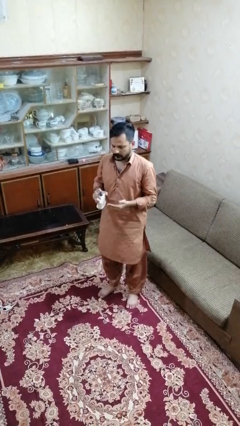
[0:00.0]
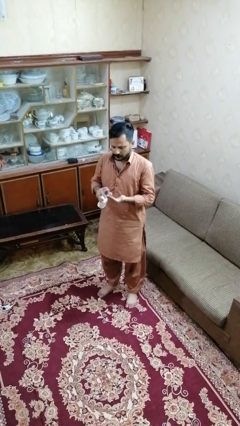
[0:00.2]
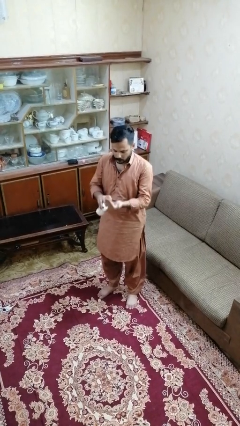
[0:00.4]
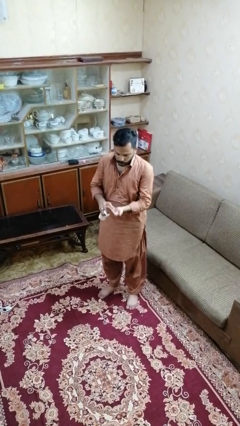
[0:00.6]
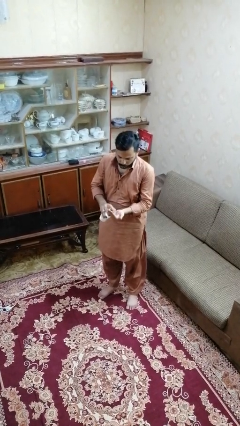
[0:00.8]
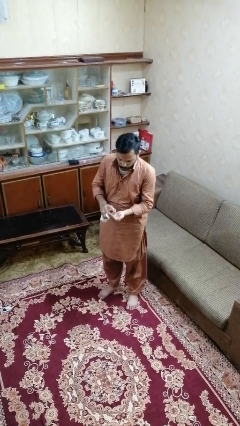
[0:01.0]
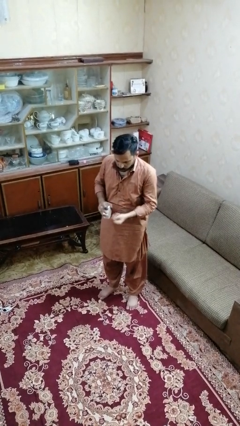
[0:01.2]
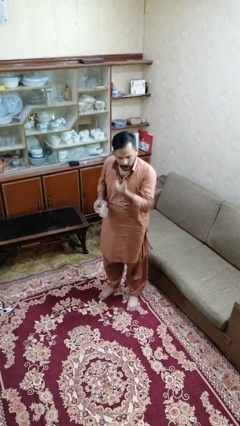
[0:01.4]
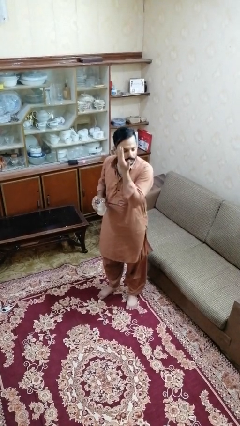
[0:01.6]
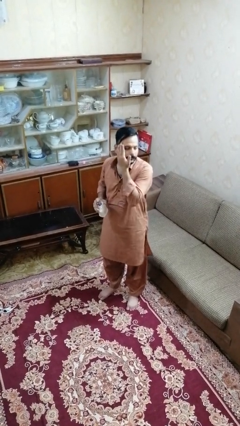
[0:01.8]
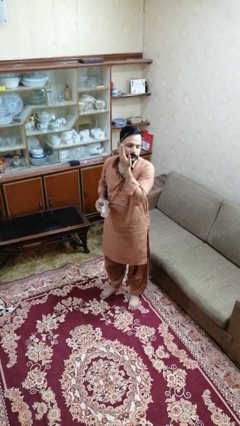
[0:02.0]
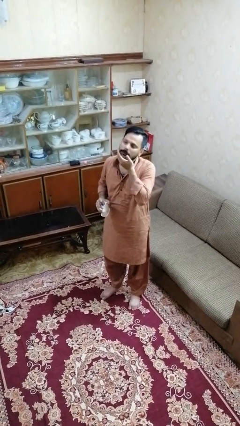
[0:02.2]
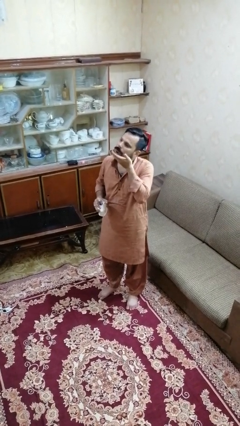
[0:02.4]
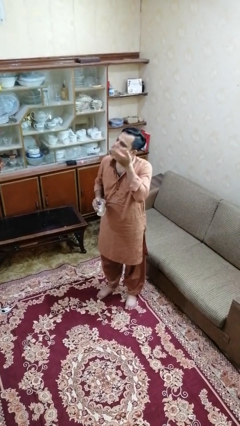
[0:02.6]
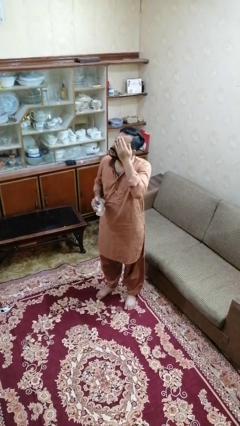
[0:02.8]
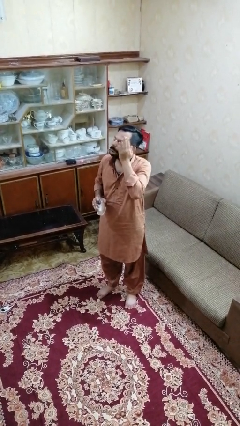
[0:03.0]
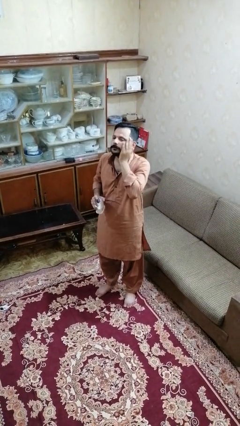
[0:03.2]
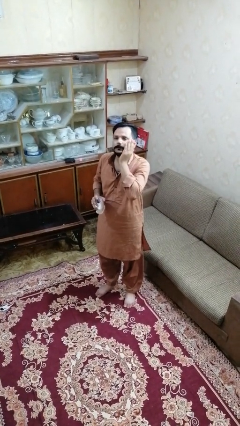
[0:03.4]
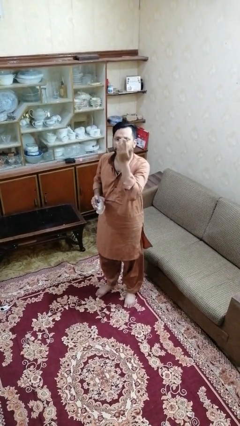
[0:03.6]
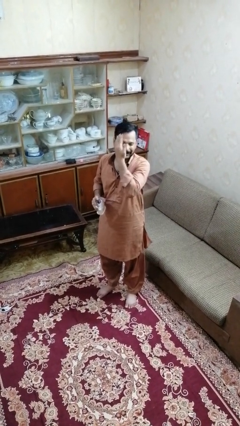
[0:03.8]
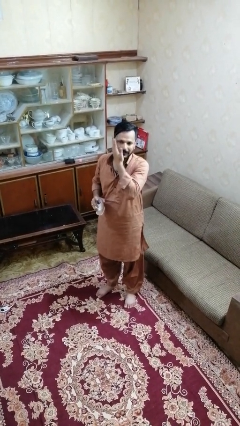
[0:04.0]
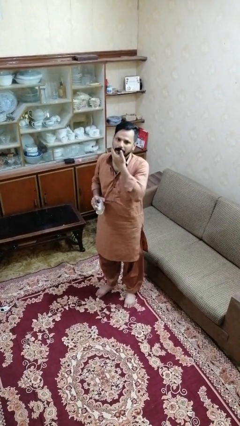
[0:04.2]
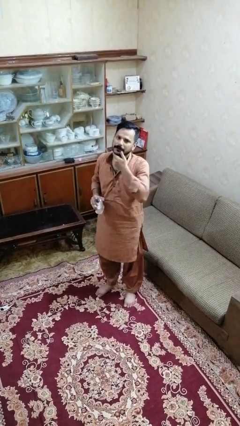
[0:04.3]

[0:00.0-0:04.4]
person applies facial moisturizer

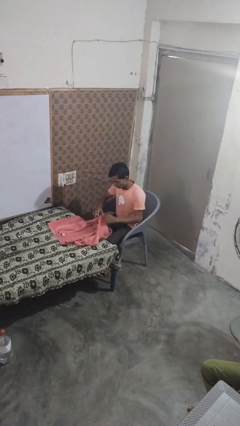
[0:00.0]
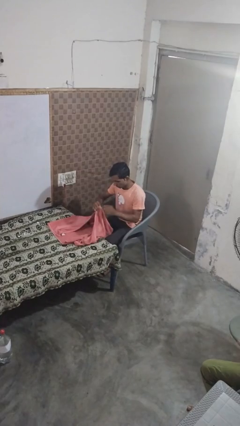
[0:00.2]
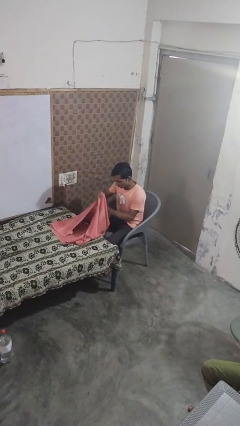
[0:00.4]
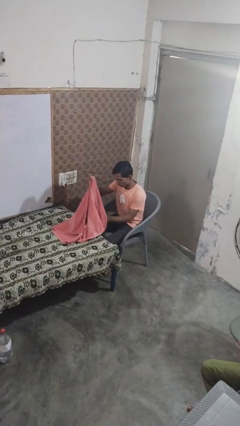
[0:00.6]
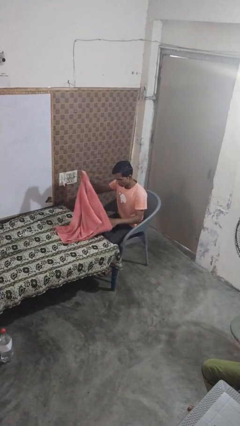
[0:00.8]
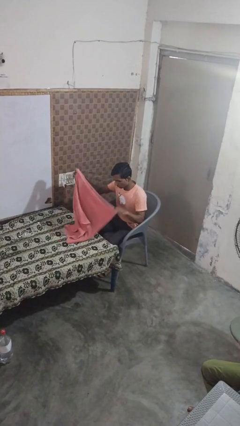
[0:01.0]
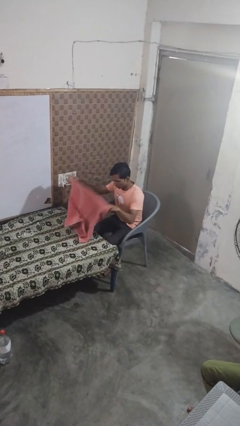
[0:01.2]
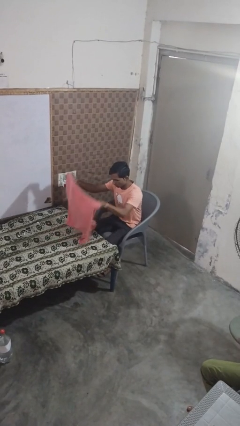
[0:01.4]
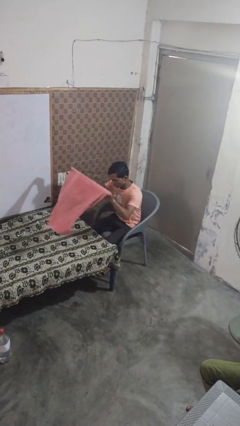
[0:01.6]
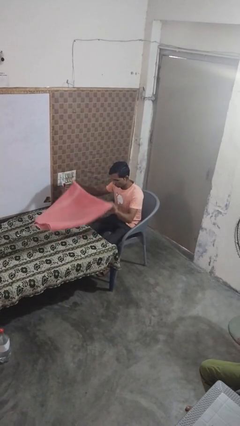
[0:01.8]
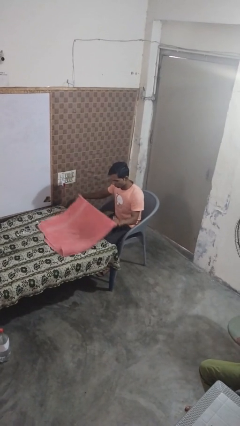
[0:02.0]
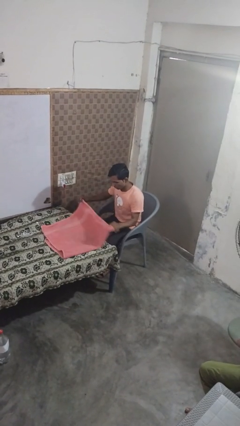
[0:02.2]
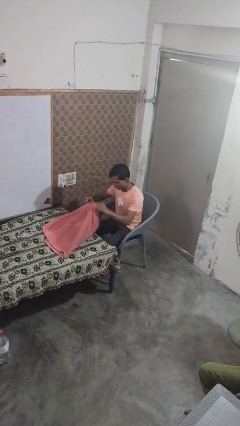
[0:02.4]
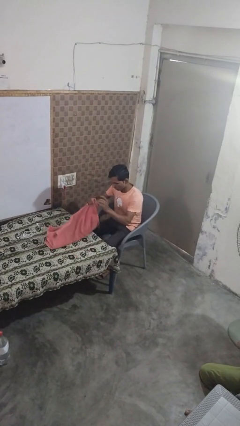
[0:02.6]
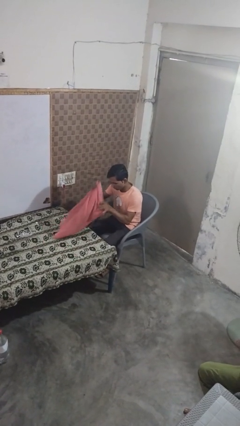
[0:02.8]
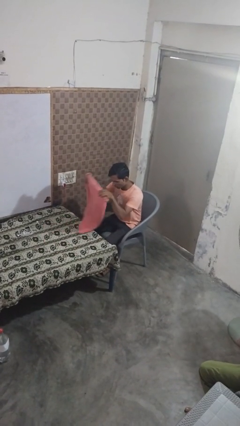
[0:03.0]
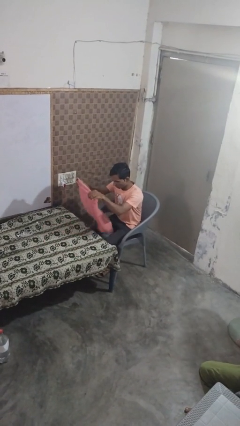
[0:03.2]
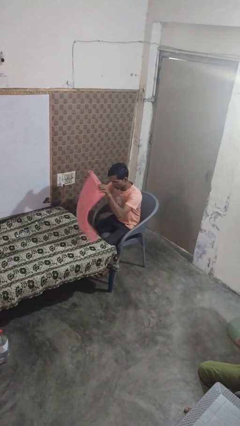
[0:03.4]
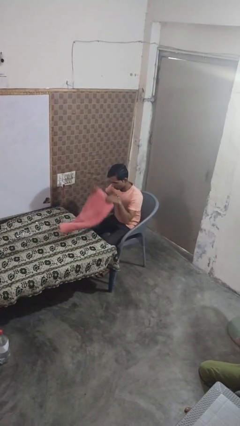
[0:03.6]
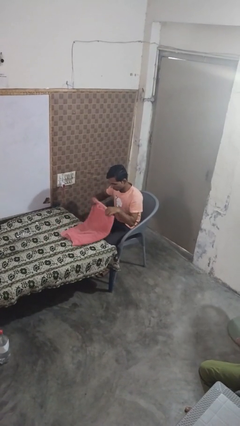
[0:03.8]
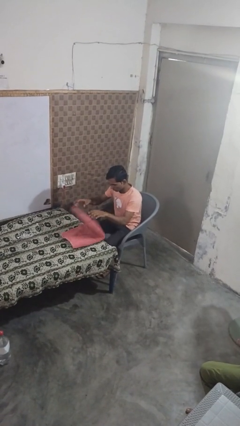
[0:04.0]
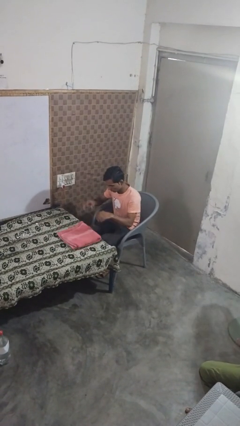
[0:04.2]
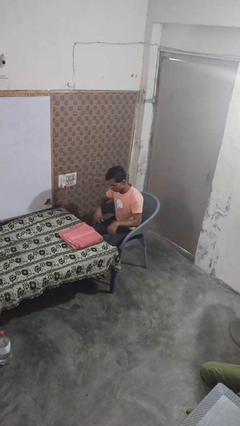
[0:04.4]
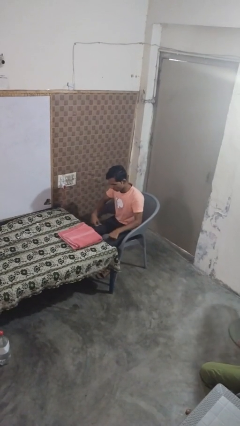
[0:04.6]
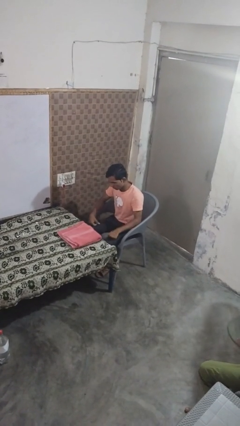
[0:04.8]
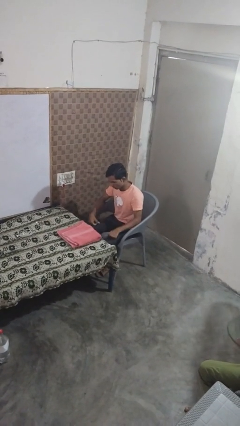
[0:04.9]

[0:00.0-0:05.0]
person folds towel

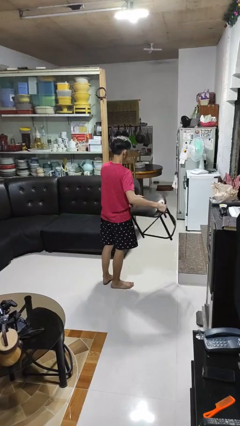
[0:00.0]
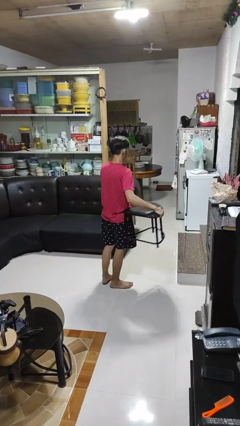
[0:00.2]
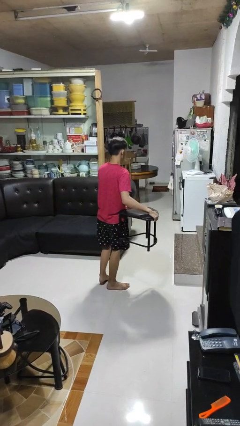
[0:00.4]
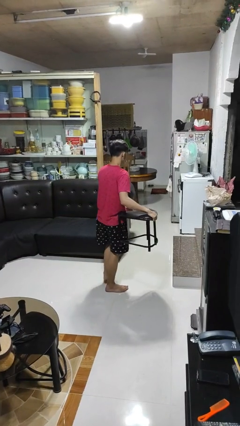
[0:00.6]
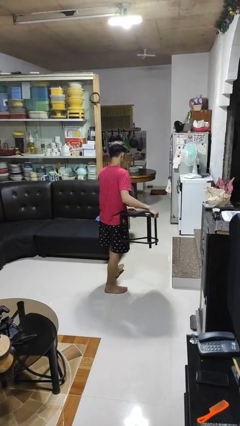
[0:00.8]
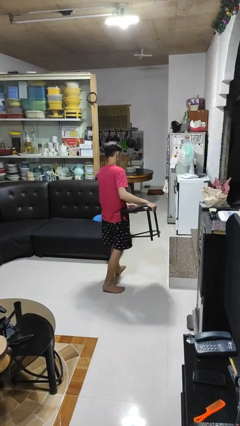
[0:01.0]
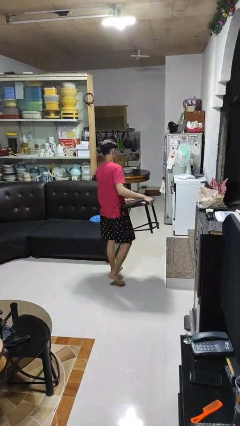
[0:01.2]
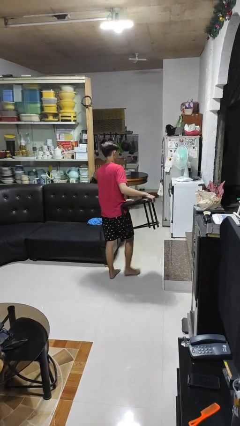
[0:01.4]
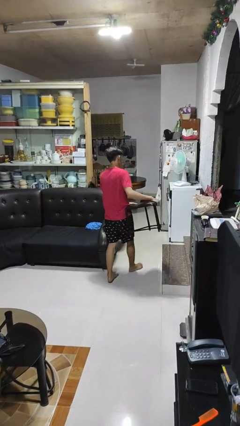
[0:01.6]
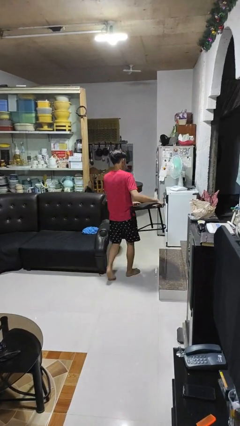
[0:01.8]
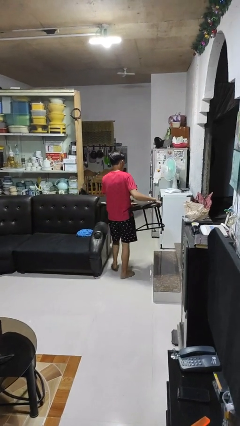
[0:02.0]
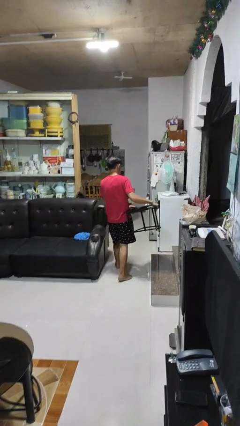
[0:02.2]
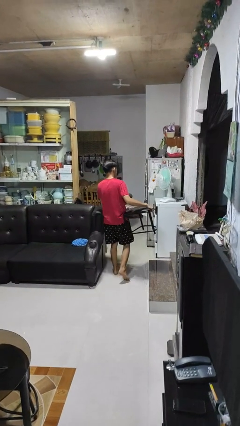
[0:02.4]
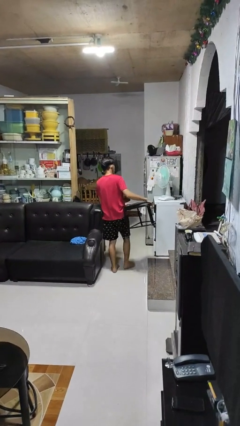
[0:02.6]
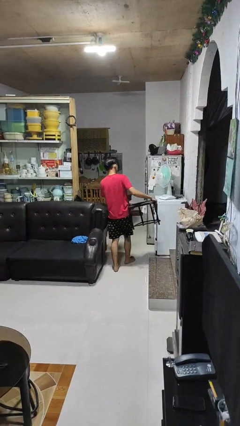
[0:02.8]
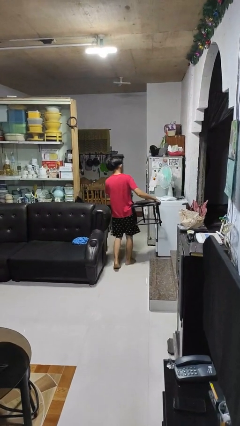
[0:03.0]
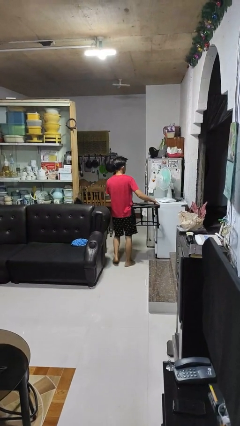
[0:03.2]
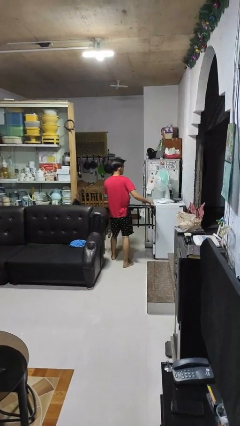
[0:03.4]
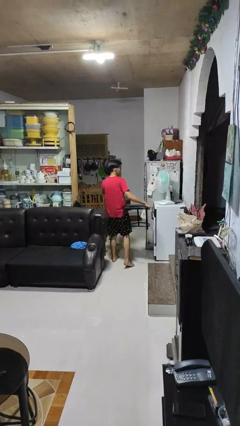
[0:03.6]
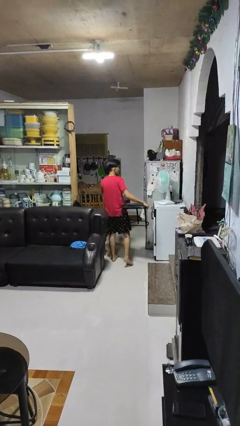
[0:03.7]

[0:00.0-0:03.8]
person carries furniture

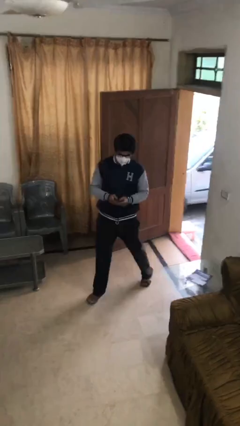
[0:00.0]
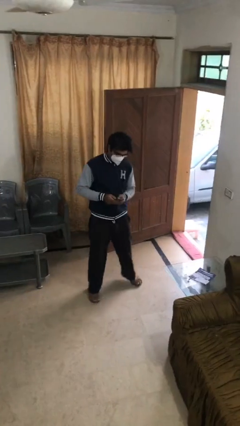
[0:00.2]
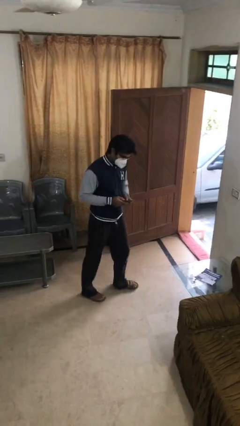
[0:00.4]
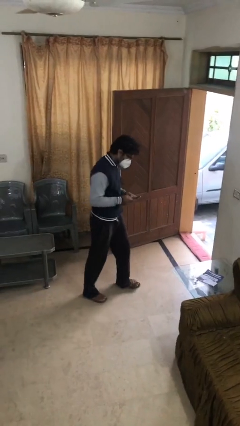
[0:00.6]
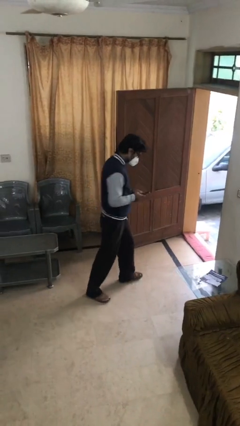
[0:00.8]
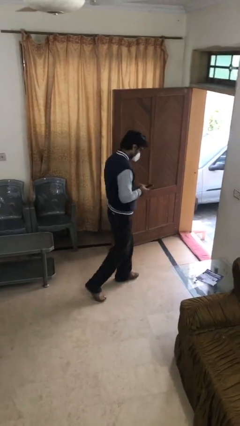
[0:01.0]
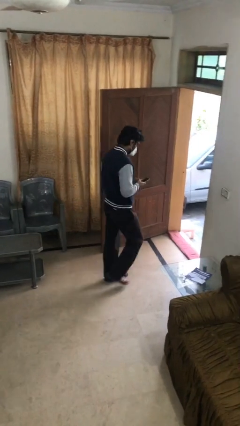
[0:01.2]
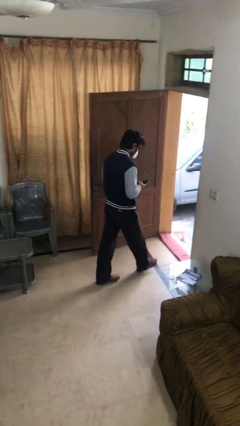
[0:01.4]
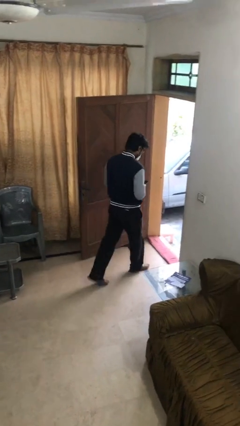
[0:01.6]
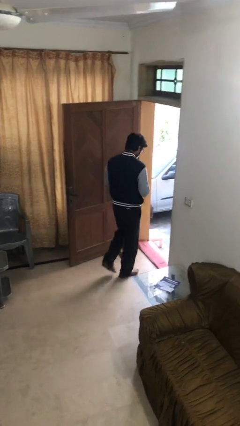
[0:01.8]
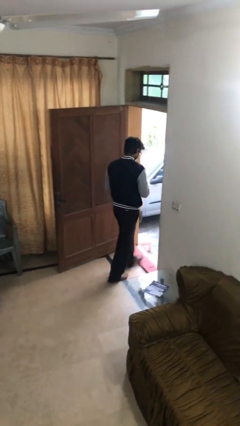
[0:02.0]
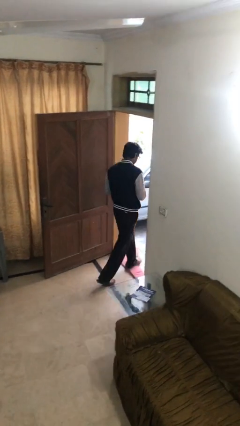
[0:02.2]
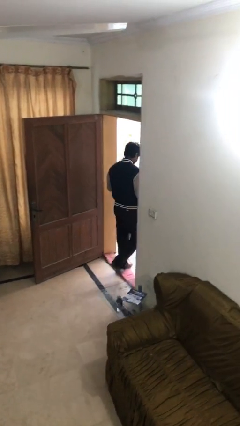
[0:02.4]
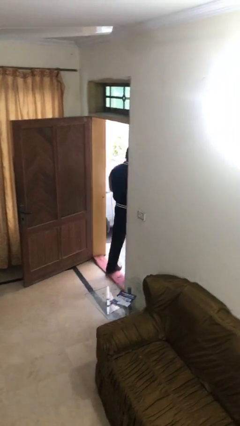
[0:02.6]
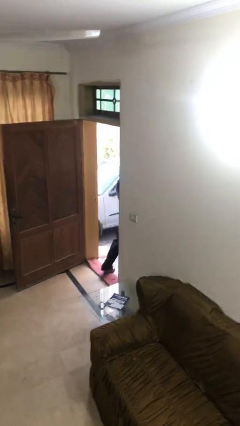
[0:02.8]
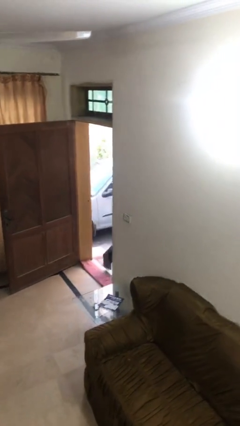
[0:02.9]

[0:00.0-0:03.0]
person exits scene through structure

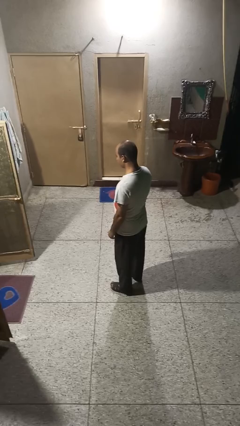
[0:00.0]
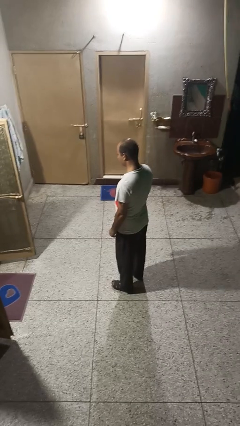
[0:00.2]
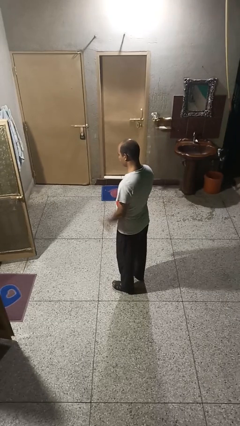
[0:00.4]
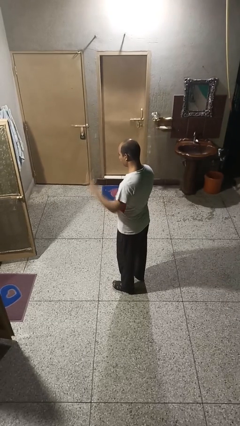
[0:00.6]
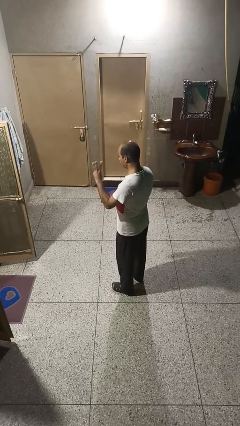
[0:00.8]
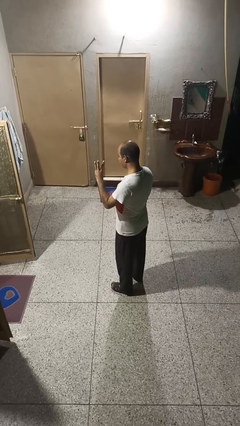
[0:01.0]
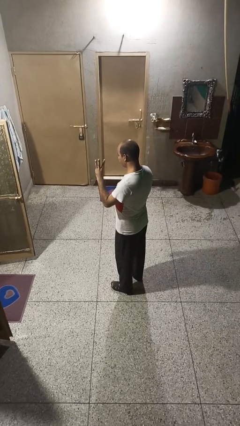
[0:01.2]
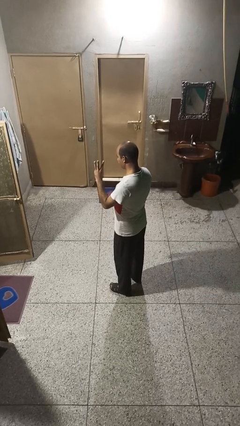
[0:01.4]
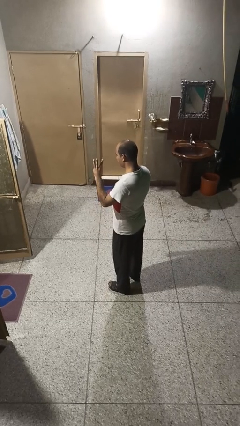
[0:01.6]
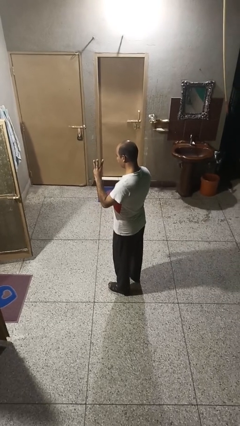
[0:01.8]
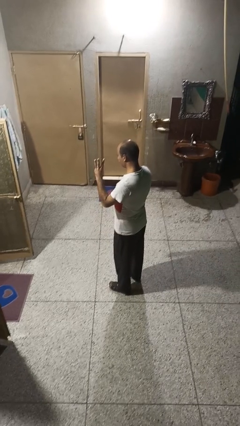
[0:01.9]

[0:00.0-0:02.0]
person gestures number three
